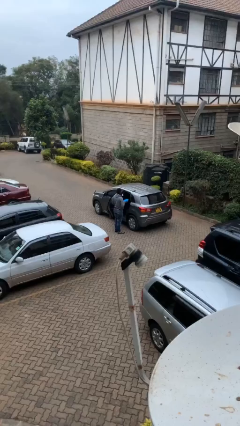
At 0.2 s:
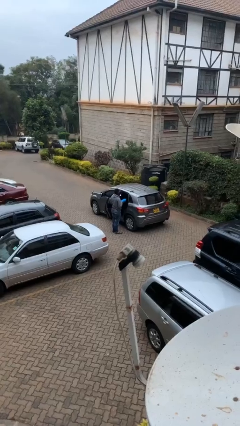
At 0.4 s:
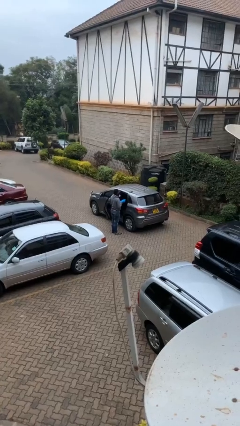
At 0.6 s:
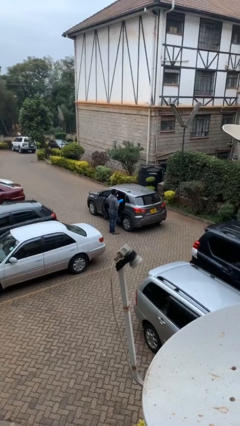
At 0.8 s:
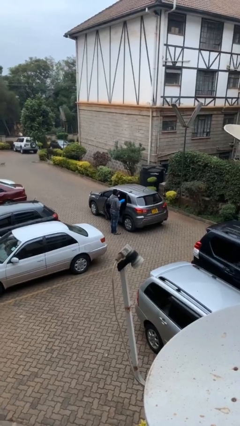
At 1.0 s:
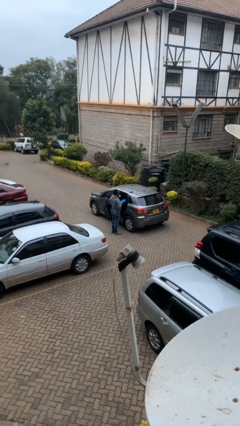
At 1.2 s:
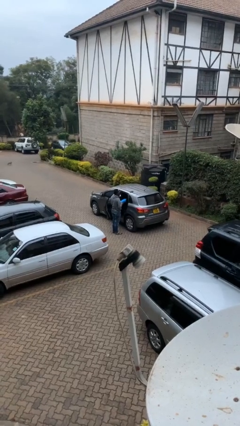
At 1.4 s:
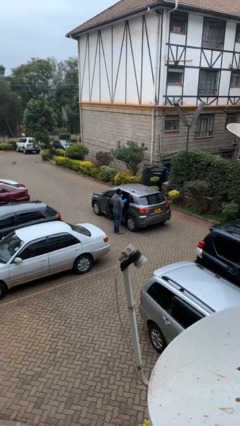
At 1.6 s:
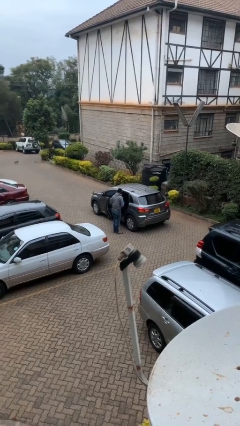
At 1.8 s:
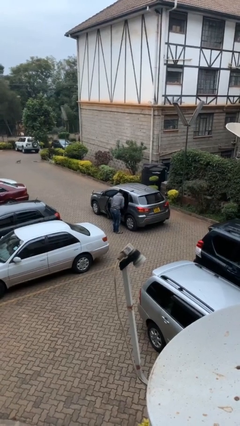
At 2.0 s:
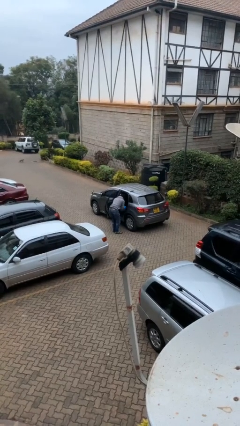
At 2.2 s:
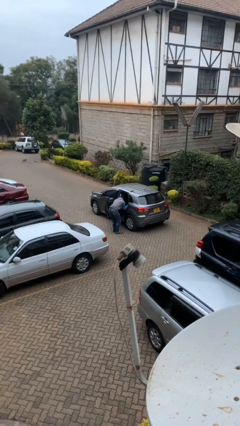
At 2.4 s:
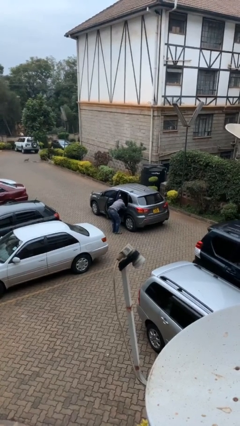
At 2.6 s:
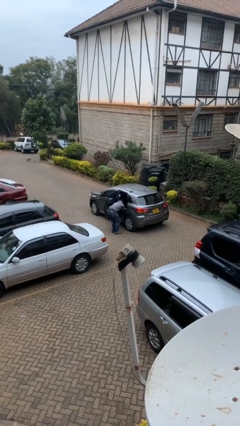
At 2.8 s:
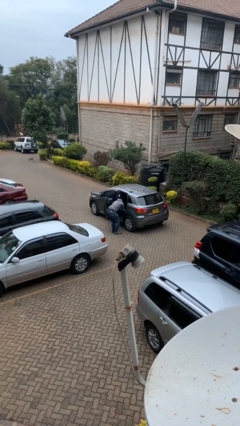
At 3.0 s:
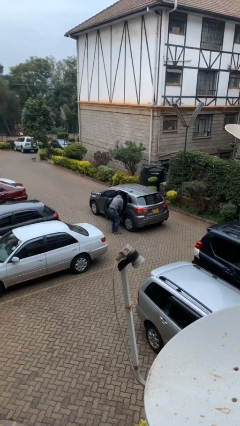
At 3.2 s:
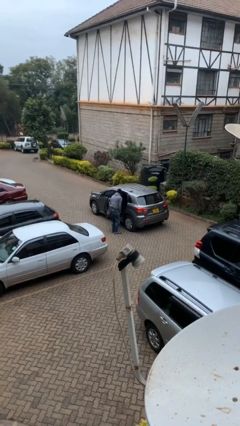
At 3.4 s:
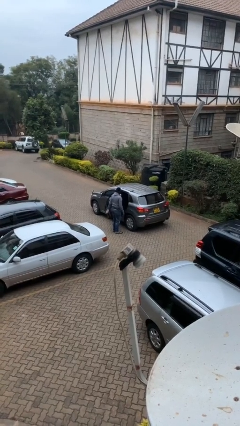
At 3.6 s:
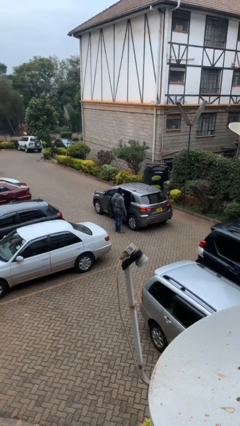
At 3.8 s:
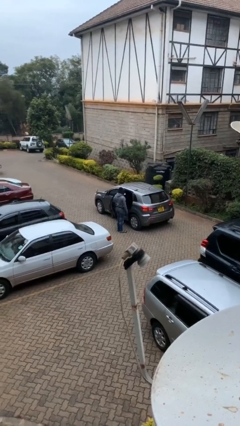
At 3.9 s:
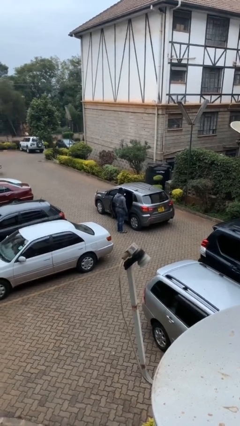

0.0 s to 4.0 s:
person loads car

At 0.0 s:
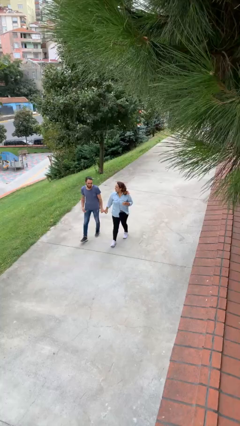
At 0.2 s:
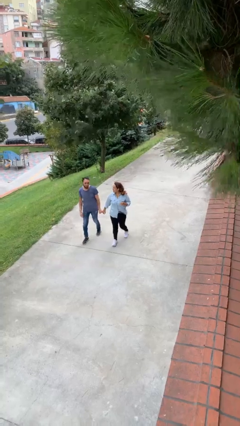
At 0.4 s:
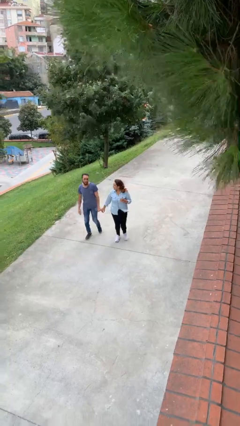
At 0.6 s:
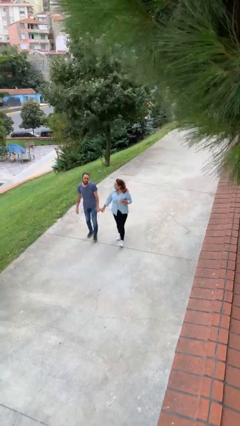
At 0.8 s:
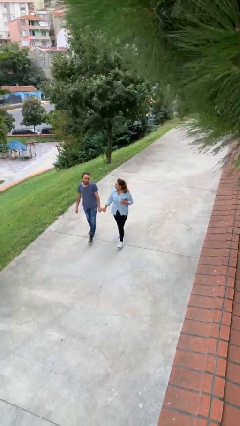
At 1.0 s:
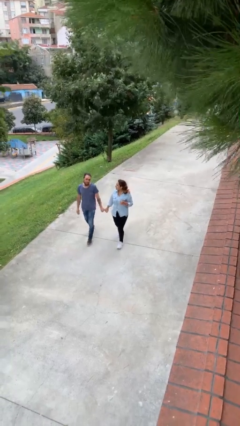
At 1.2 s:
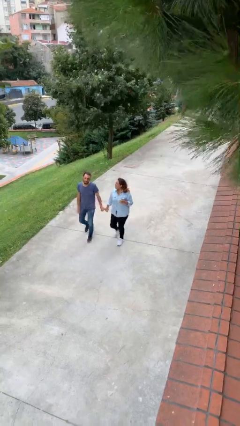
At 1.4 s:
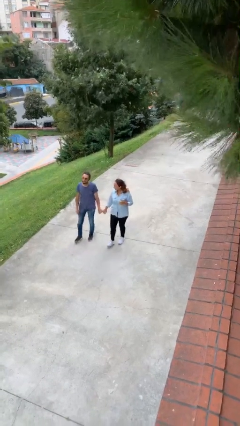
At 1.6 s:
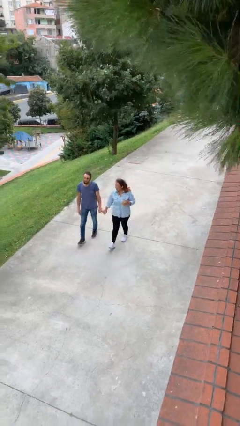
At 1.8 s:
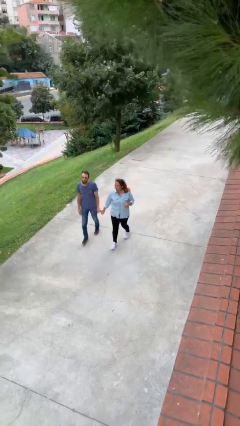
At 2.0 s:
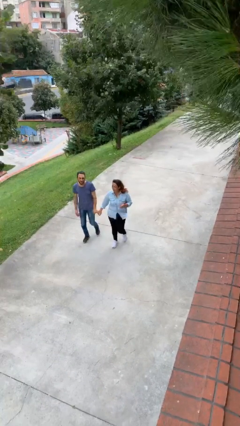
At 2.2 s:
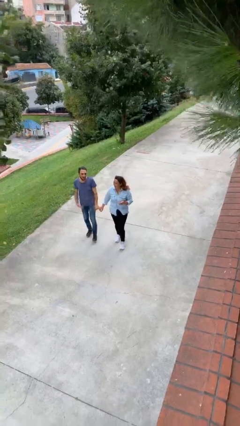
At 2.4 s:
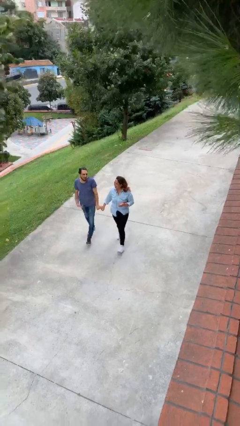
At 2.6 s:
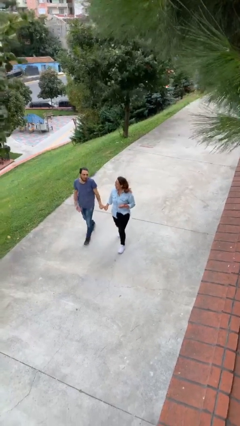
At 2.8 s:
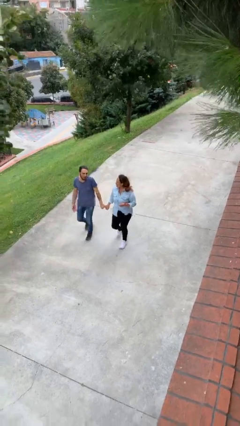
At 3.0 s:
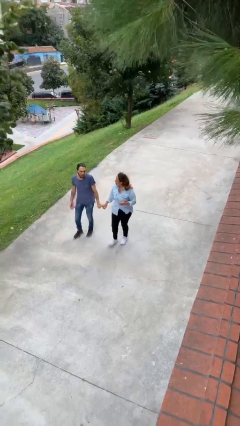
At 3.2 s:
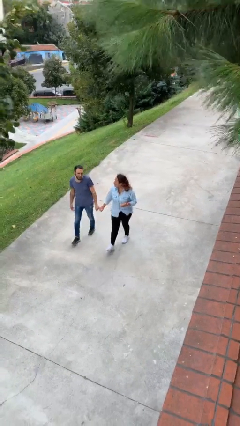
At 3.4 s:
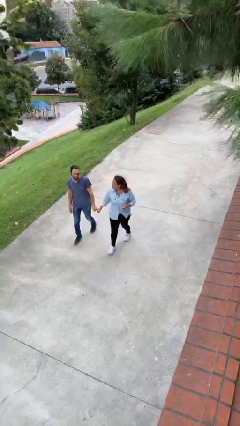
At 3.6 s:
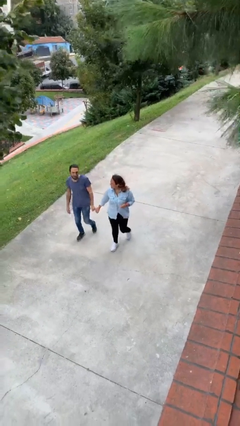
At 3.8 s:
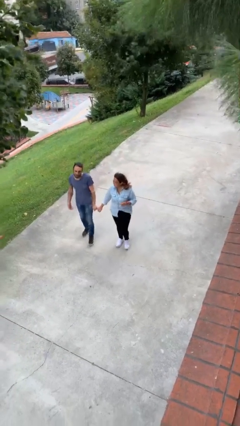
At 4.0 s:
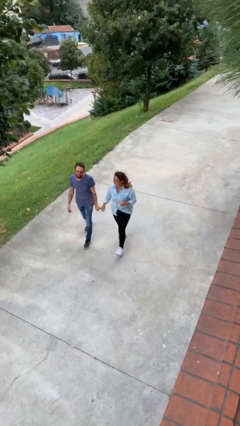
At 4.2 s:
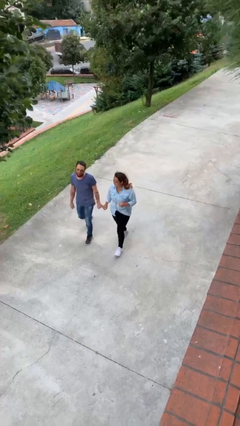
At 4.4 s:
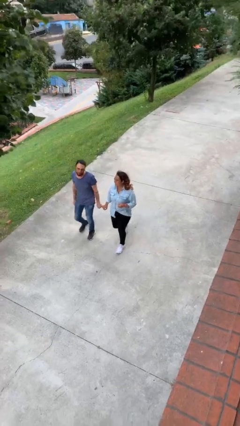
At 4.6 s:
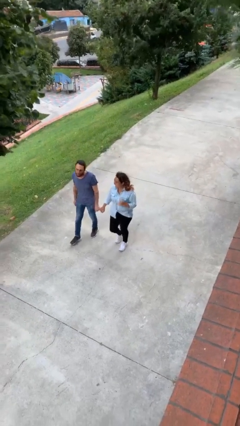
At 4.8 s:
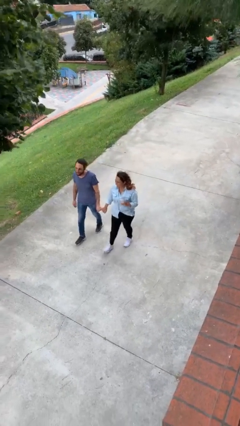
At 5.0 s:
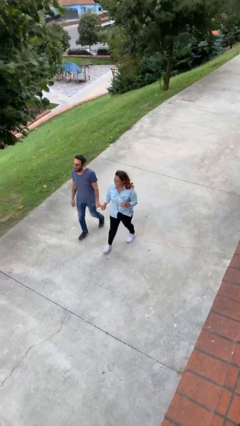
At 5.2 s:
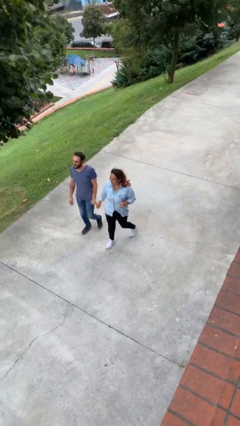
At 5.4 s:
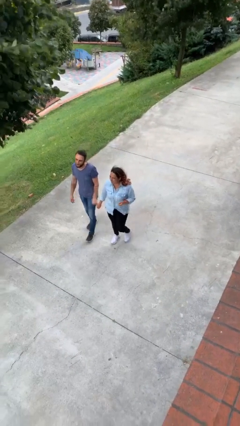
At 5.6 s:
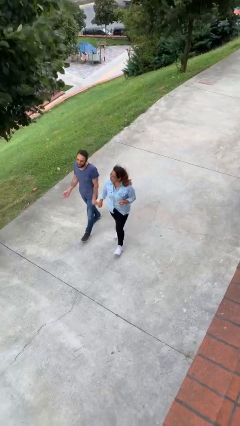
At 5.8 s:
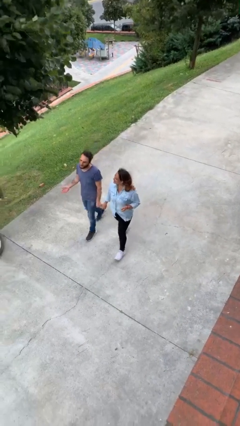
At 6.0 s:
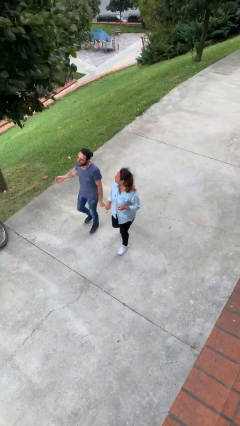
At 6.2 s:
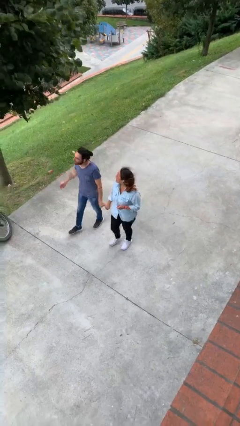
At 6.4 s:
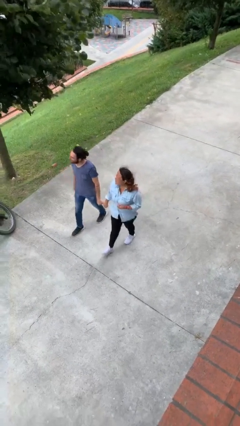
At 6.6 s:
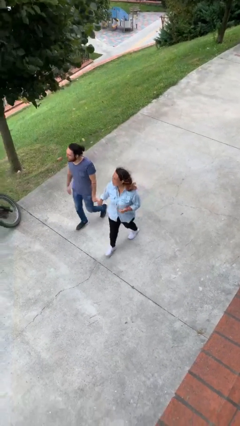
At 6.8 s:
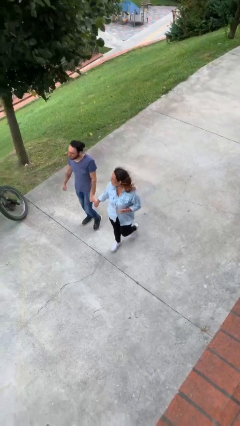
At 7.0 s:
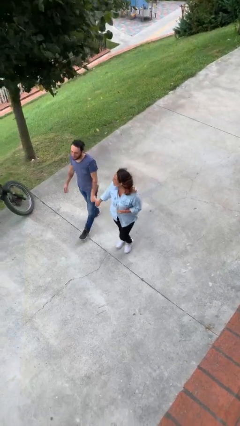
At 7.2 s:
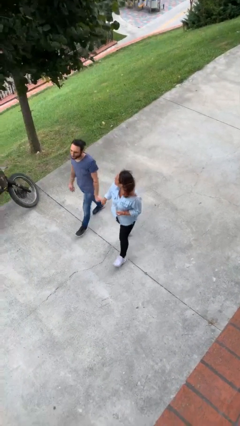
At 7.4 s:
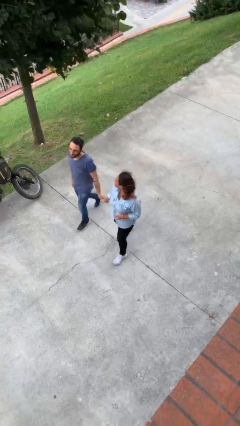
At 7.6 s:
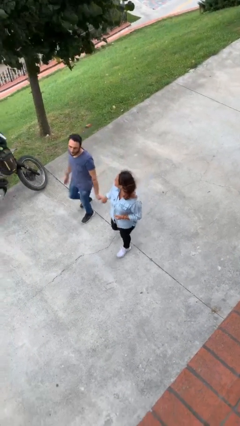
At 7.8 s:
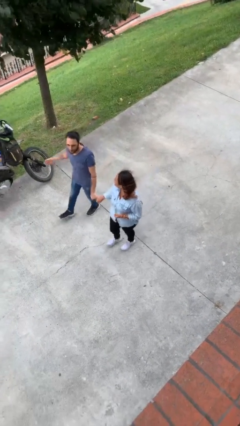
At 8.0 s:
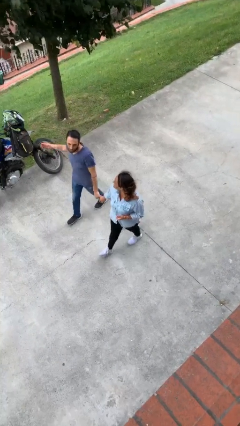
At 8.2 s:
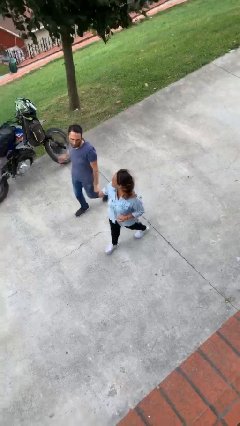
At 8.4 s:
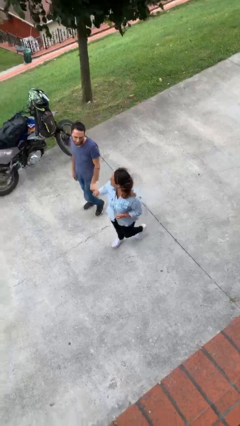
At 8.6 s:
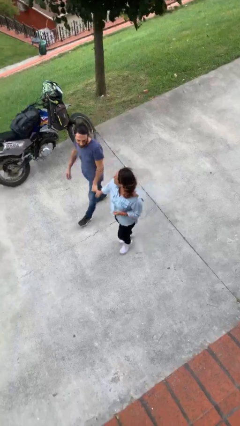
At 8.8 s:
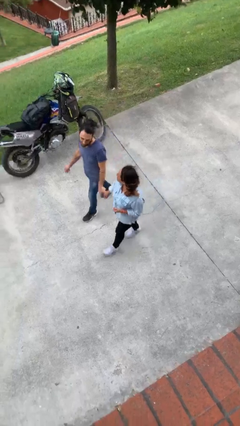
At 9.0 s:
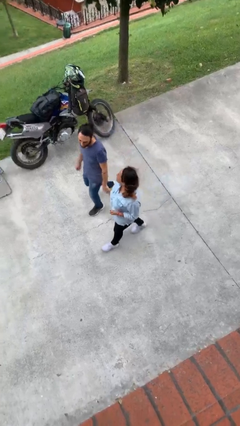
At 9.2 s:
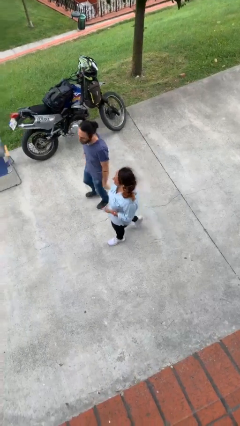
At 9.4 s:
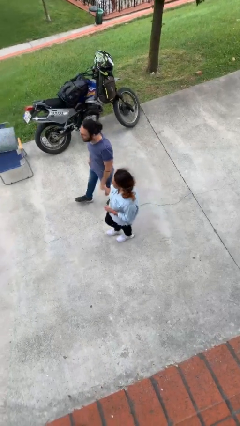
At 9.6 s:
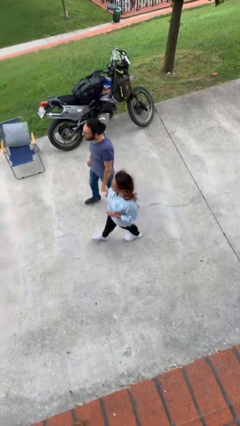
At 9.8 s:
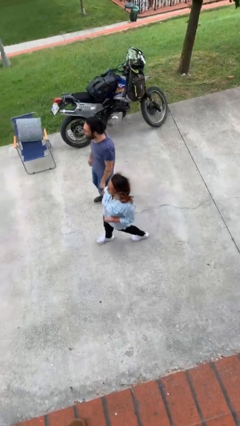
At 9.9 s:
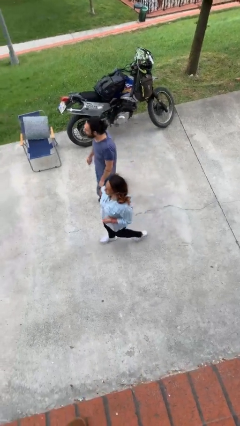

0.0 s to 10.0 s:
person holds hand

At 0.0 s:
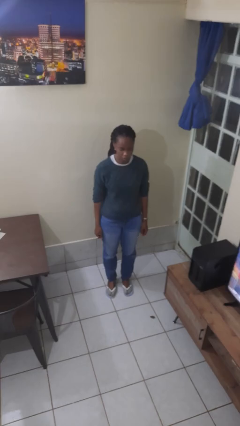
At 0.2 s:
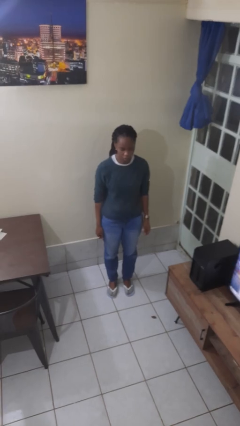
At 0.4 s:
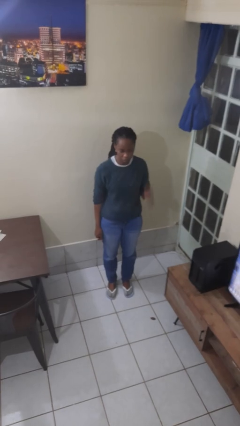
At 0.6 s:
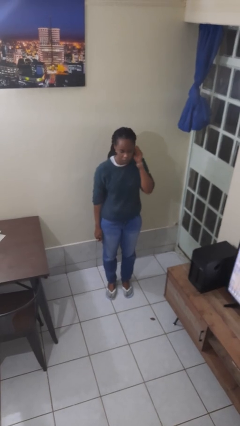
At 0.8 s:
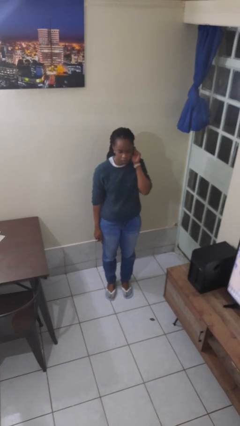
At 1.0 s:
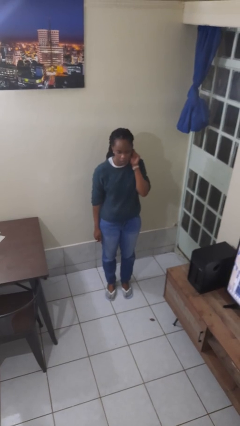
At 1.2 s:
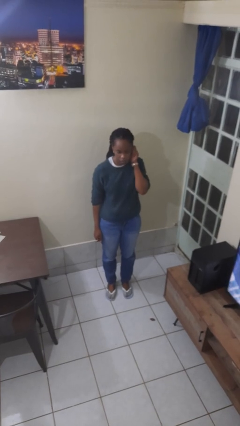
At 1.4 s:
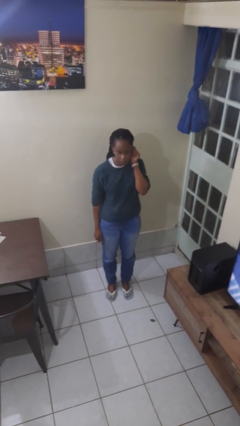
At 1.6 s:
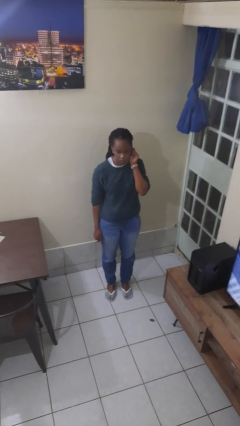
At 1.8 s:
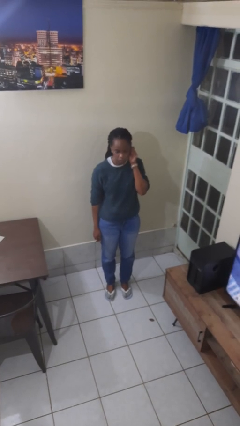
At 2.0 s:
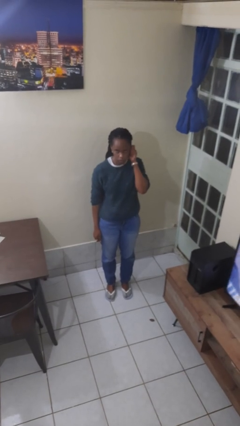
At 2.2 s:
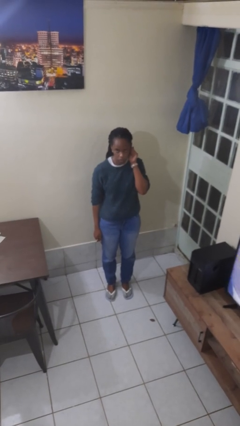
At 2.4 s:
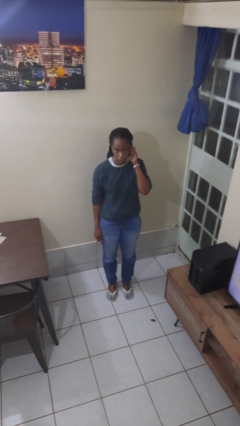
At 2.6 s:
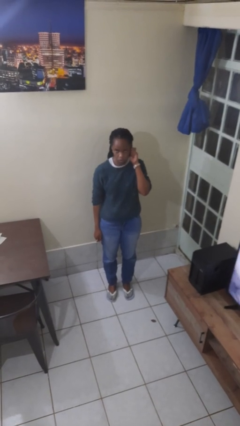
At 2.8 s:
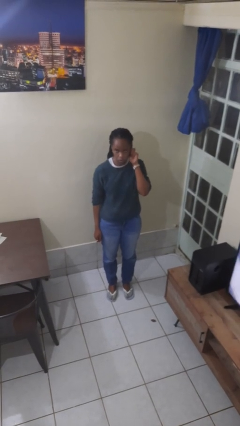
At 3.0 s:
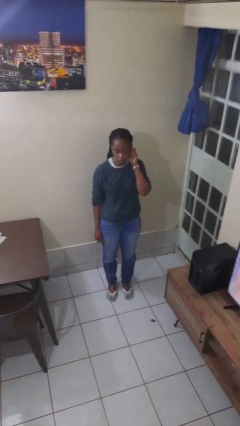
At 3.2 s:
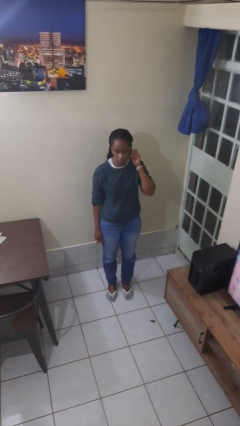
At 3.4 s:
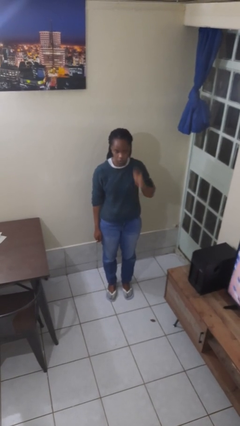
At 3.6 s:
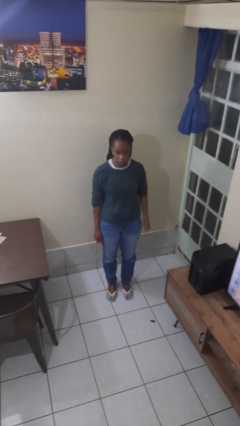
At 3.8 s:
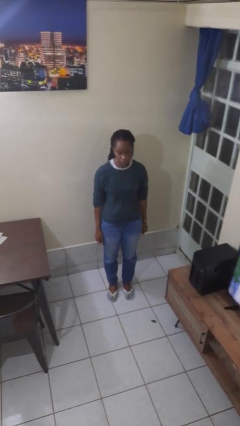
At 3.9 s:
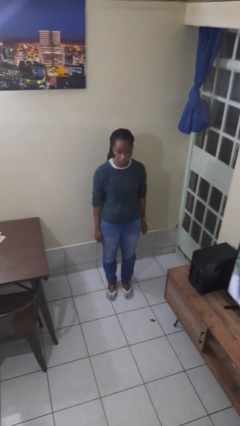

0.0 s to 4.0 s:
person touches earlobe
